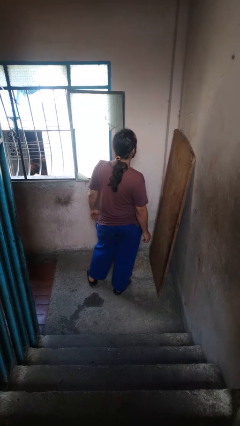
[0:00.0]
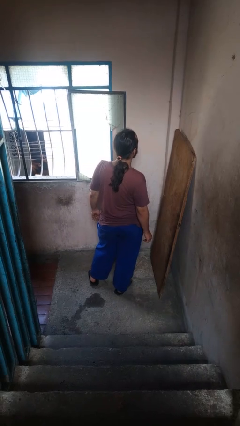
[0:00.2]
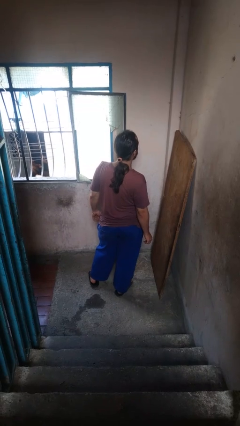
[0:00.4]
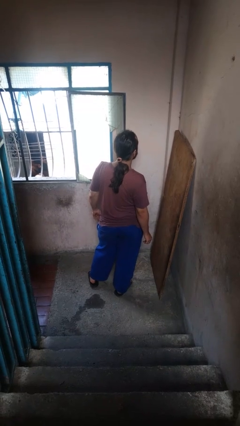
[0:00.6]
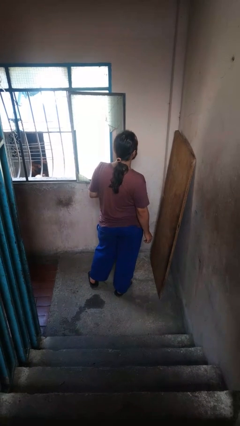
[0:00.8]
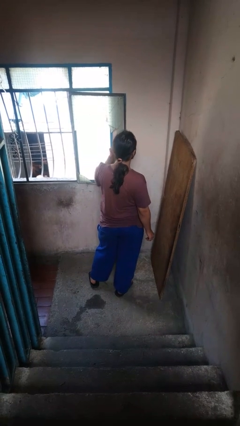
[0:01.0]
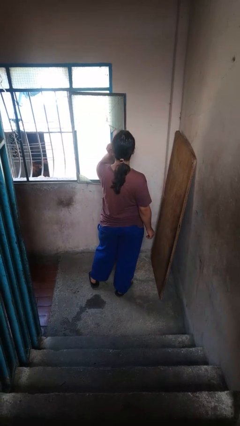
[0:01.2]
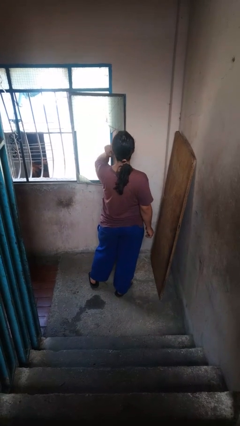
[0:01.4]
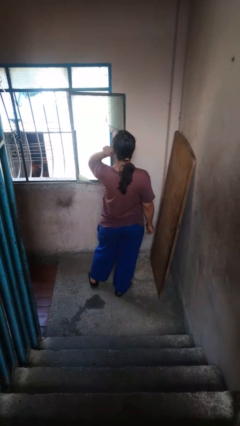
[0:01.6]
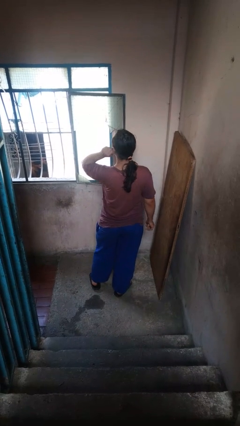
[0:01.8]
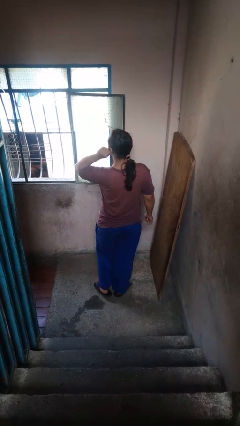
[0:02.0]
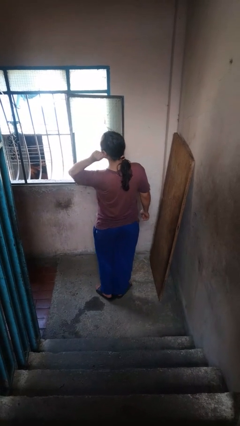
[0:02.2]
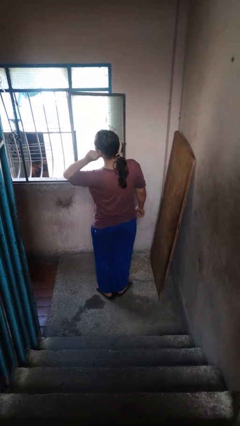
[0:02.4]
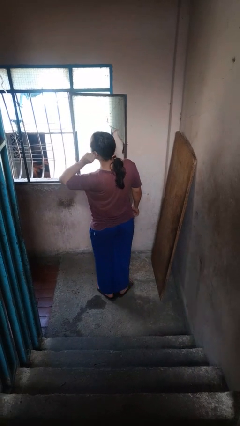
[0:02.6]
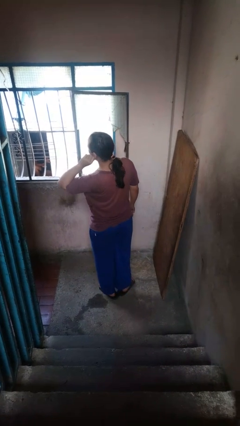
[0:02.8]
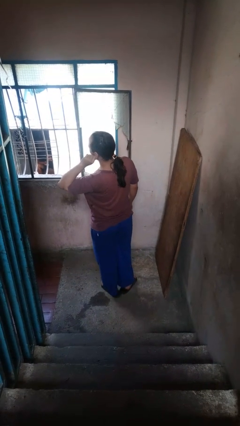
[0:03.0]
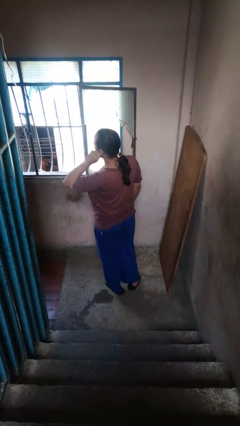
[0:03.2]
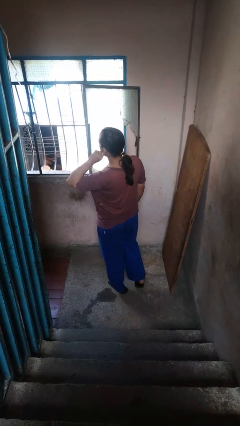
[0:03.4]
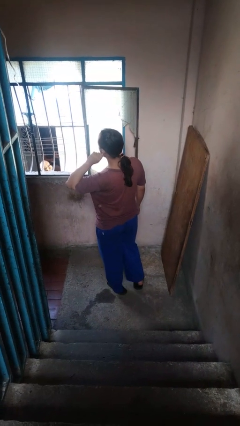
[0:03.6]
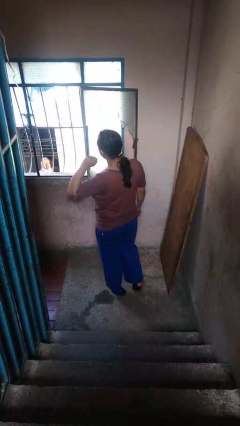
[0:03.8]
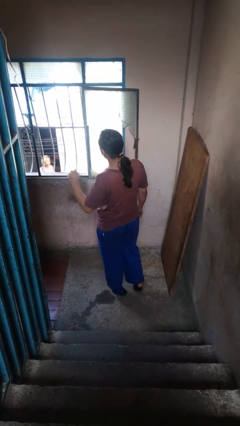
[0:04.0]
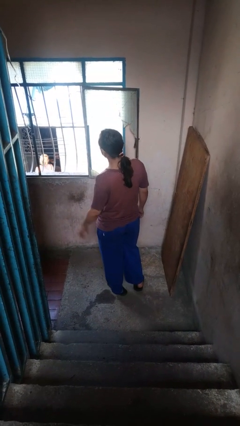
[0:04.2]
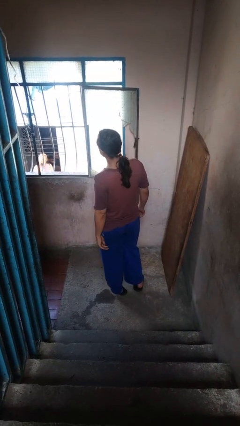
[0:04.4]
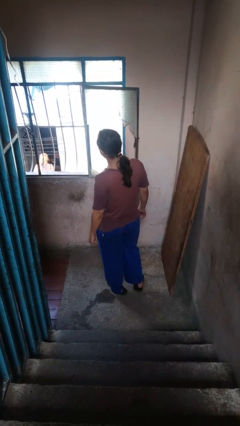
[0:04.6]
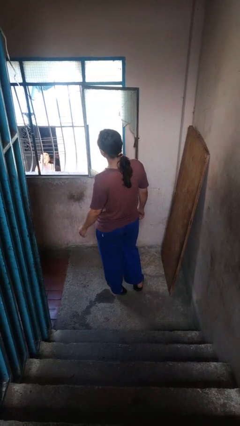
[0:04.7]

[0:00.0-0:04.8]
person touches earlobe

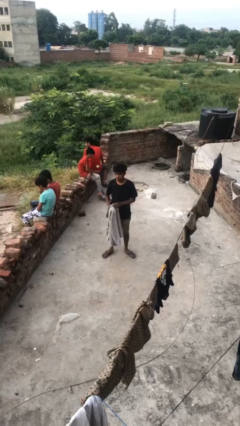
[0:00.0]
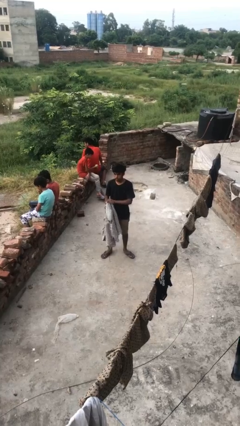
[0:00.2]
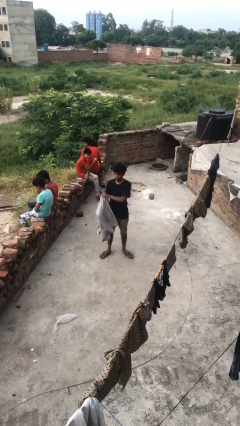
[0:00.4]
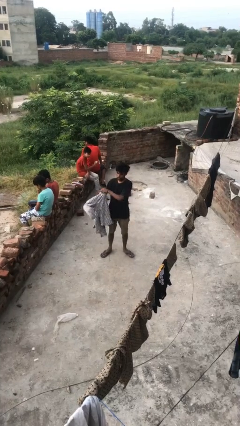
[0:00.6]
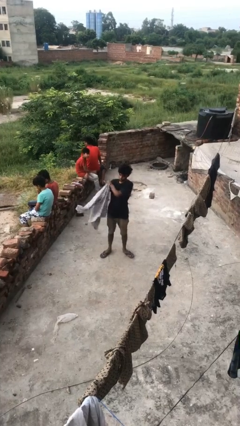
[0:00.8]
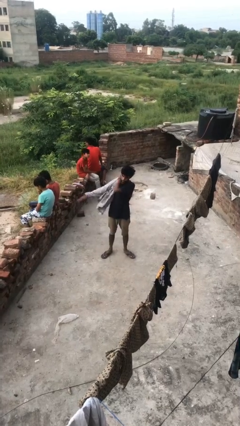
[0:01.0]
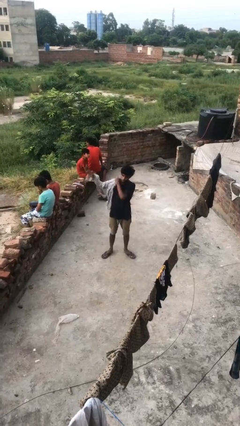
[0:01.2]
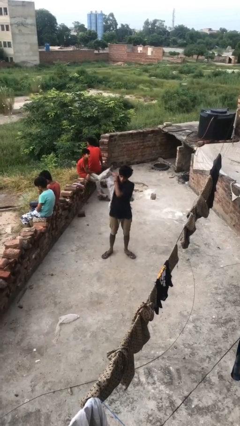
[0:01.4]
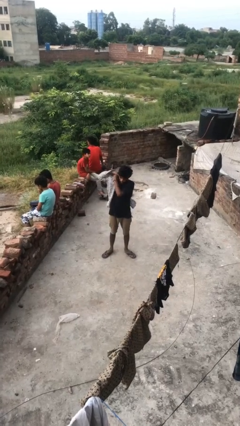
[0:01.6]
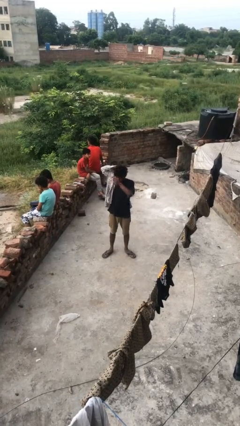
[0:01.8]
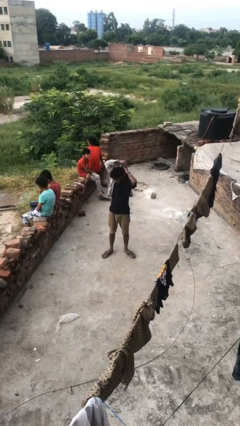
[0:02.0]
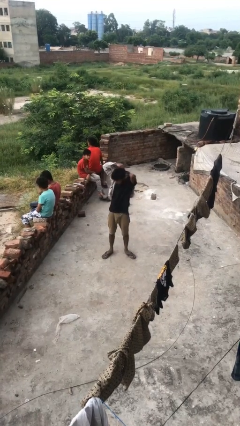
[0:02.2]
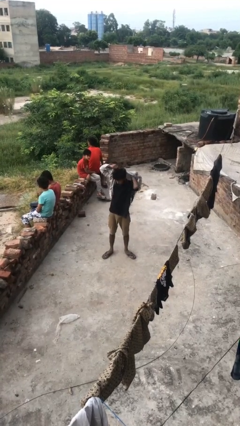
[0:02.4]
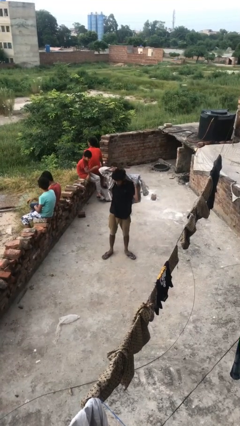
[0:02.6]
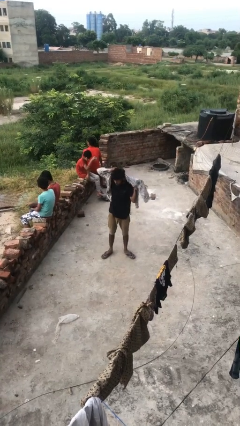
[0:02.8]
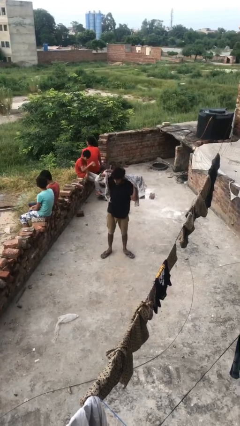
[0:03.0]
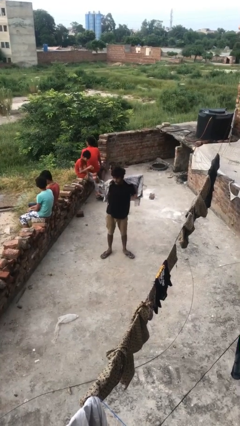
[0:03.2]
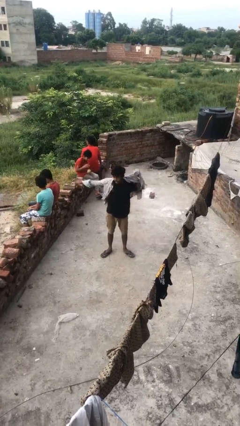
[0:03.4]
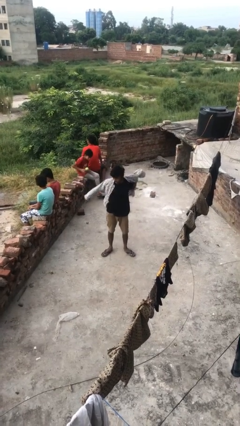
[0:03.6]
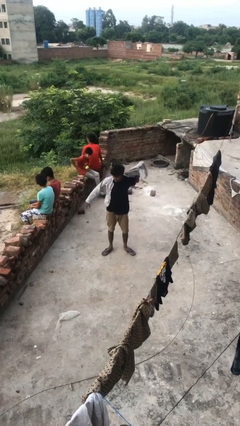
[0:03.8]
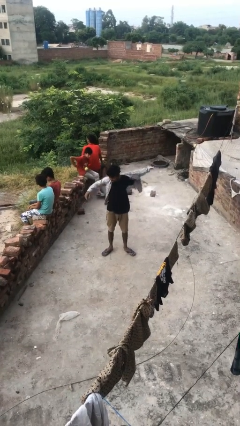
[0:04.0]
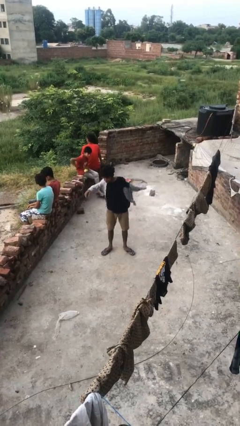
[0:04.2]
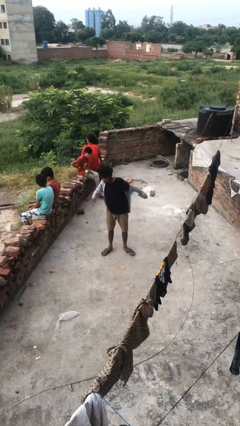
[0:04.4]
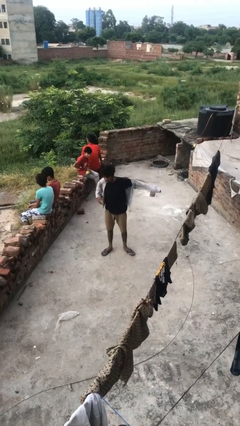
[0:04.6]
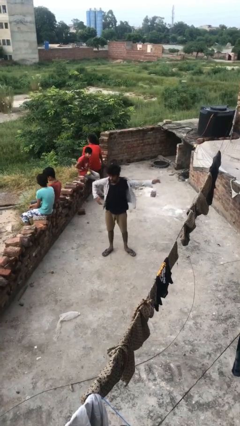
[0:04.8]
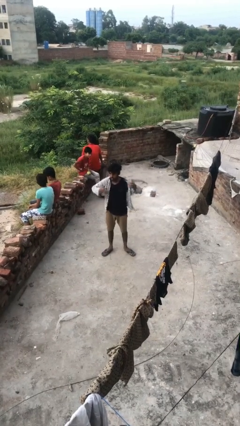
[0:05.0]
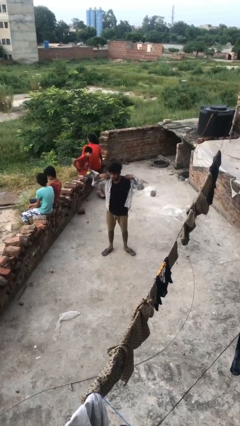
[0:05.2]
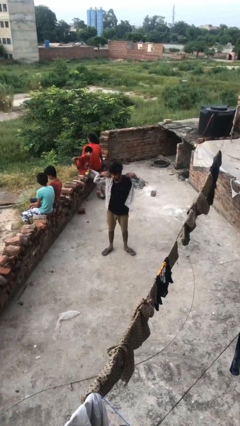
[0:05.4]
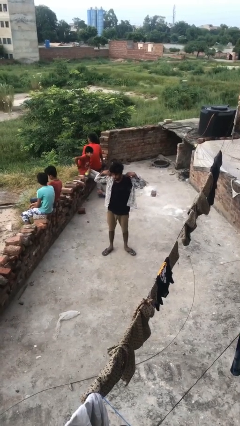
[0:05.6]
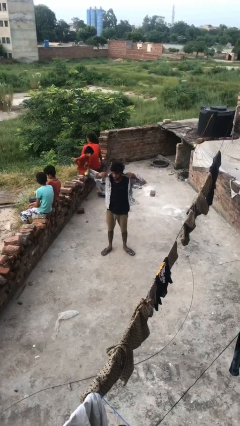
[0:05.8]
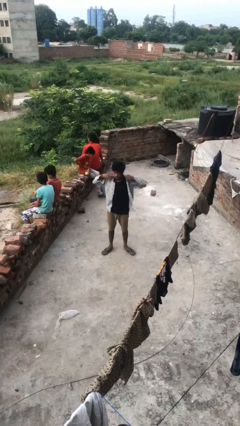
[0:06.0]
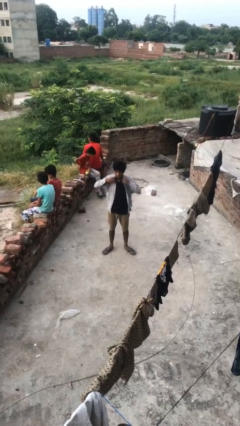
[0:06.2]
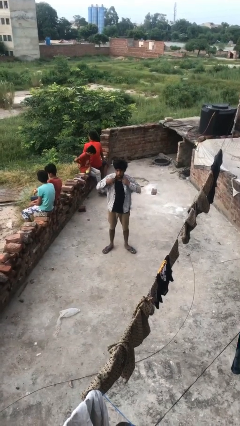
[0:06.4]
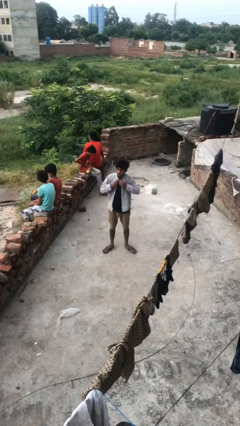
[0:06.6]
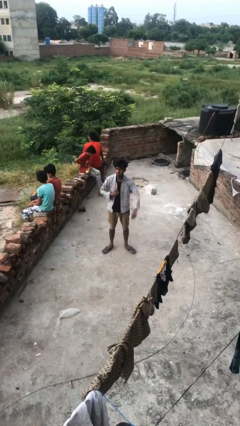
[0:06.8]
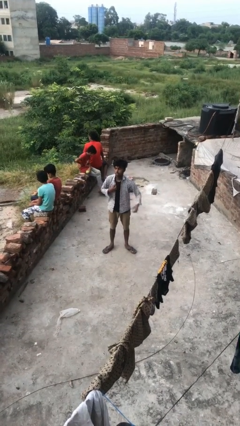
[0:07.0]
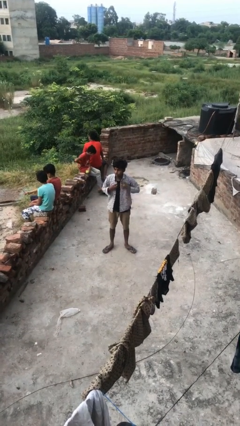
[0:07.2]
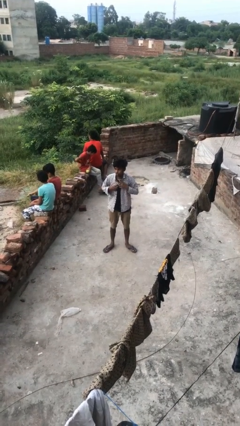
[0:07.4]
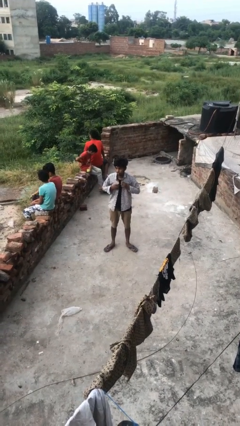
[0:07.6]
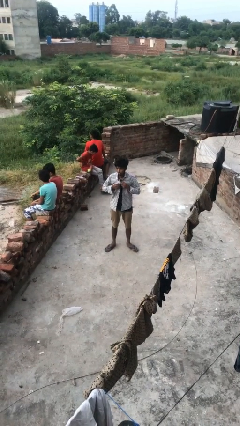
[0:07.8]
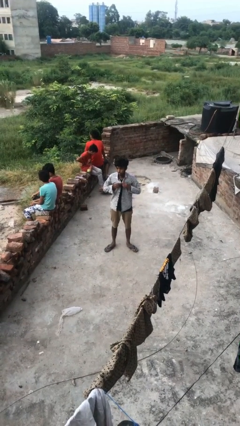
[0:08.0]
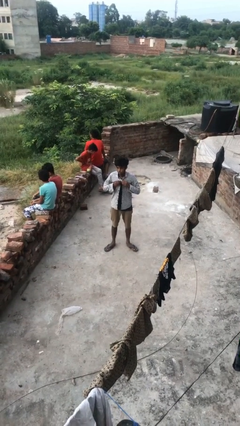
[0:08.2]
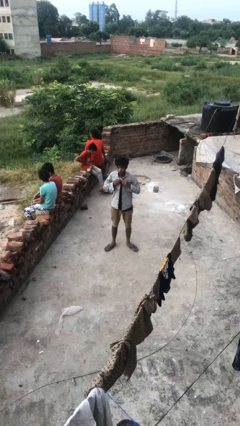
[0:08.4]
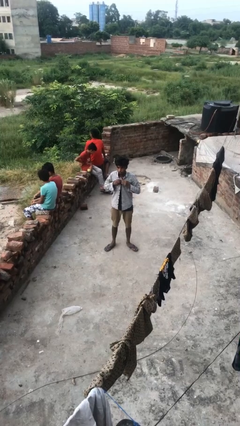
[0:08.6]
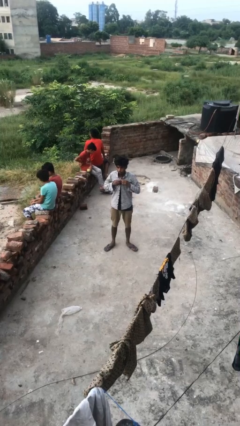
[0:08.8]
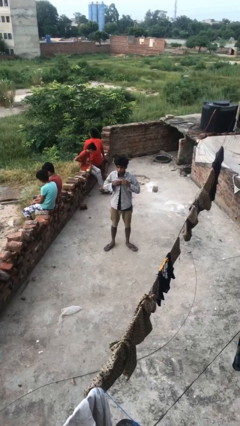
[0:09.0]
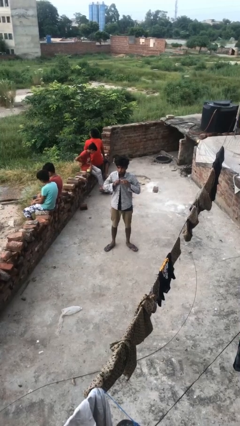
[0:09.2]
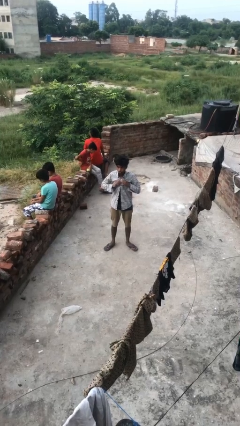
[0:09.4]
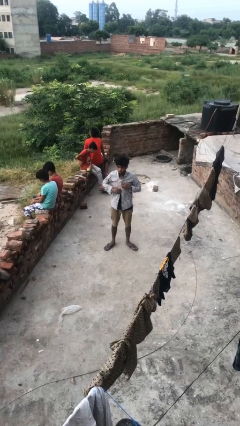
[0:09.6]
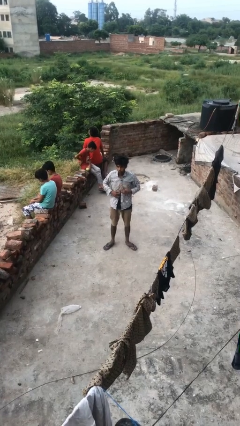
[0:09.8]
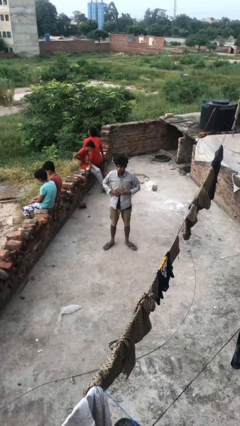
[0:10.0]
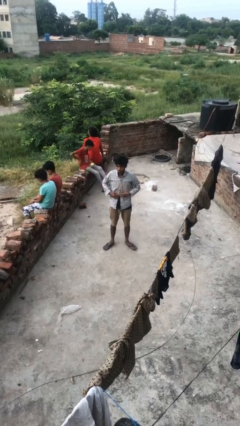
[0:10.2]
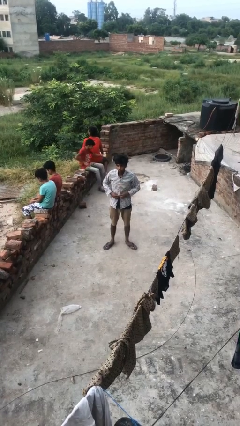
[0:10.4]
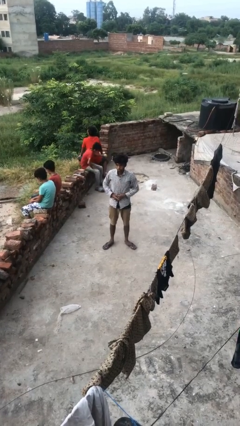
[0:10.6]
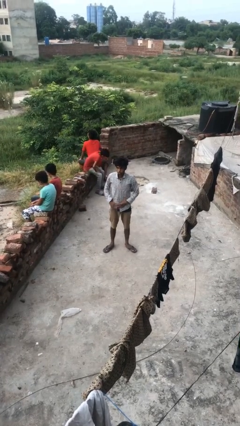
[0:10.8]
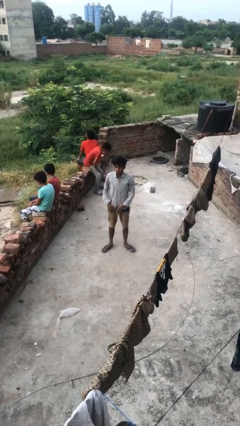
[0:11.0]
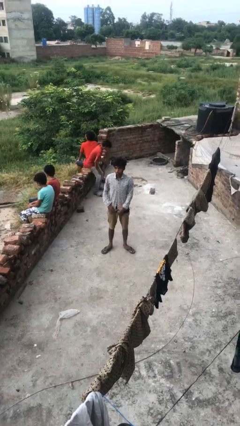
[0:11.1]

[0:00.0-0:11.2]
person puts on shirt

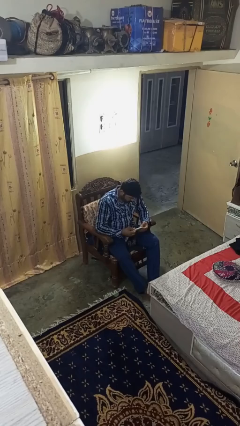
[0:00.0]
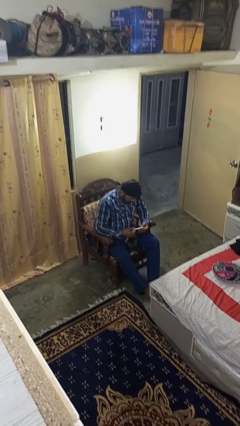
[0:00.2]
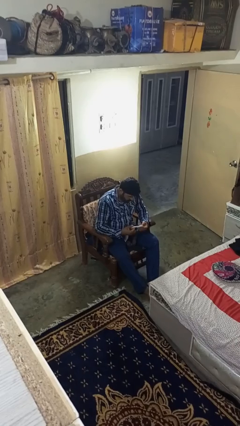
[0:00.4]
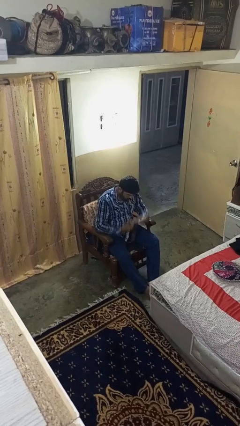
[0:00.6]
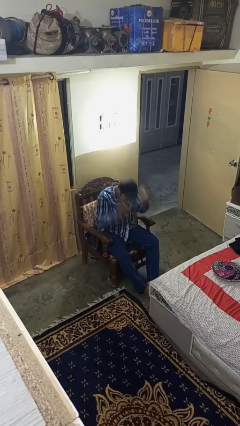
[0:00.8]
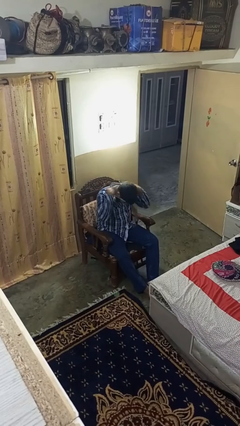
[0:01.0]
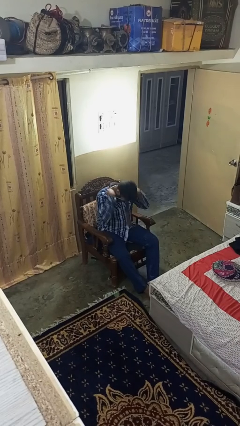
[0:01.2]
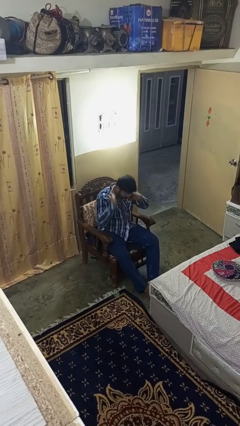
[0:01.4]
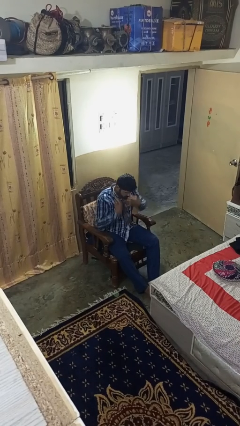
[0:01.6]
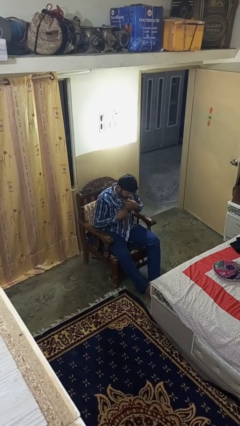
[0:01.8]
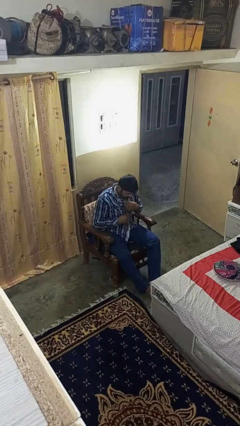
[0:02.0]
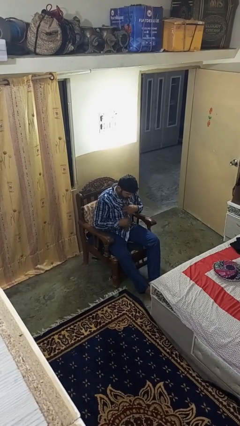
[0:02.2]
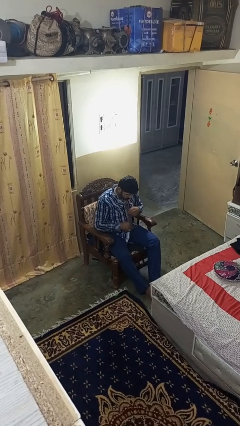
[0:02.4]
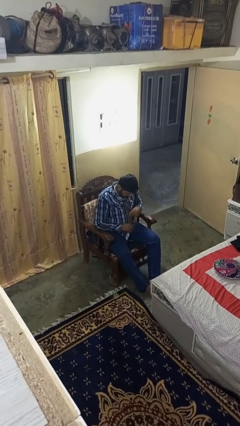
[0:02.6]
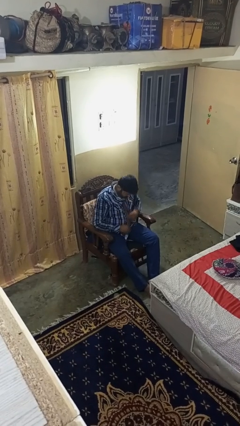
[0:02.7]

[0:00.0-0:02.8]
person puts on necktie
